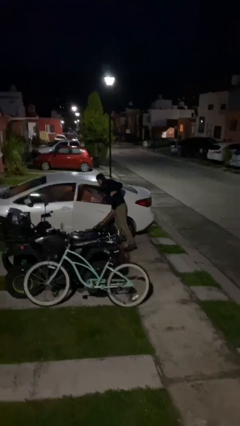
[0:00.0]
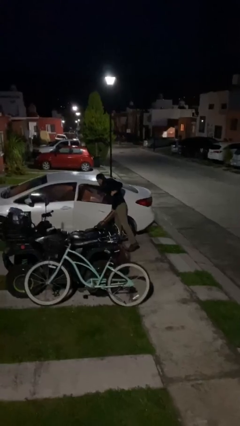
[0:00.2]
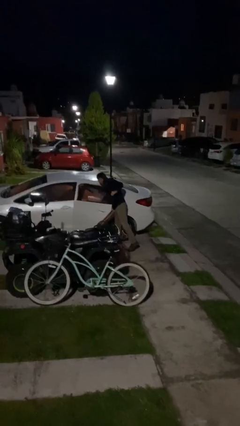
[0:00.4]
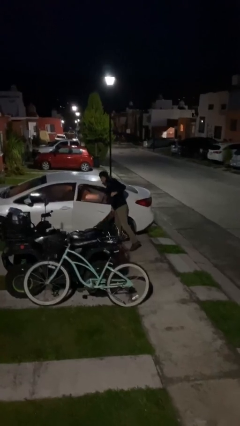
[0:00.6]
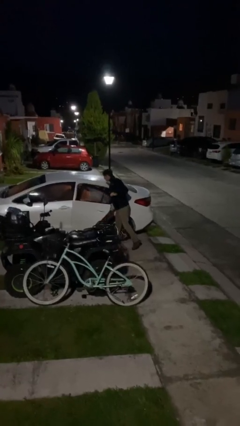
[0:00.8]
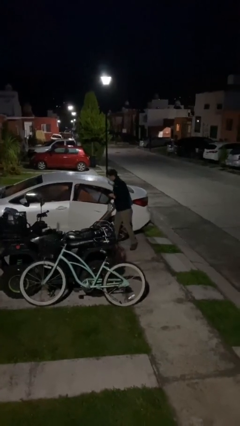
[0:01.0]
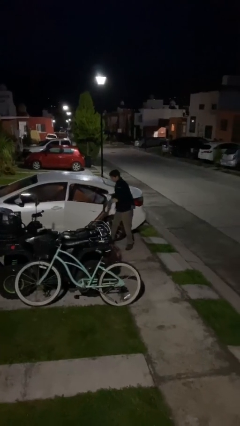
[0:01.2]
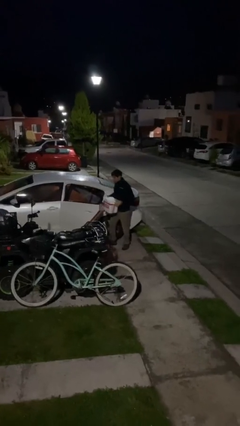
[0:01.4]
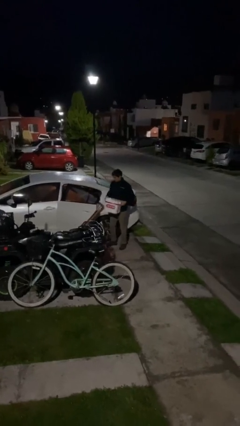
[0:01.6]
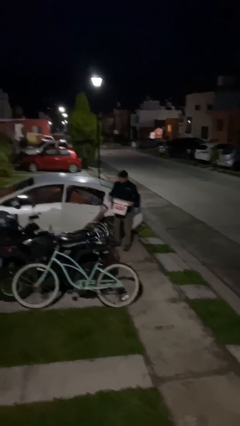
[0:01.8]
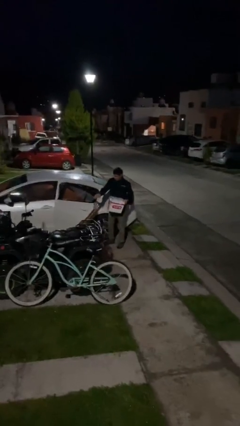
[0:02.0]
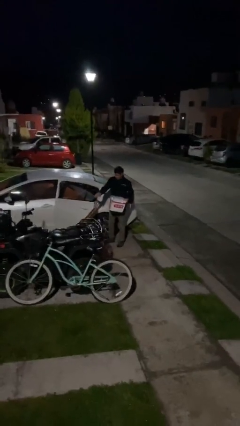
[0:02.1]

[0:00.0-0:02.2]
person unloads car

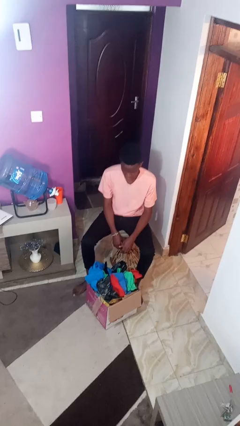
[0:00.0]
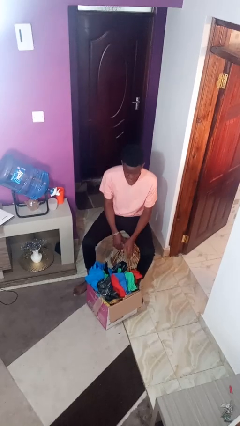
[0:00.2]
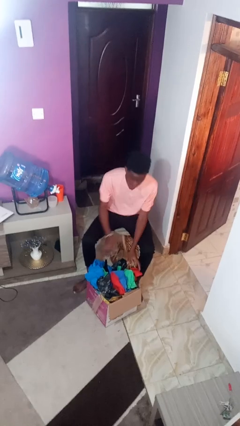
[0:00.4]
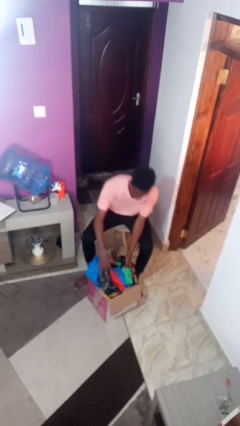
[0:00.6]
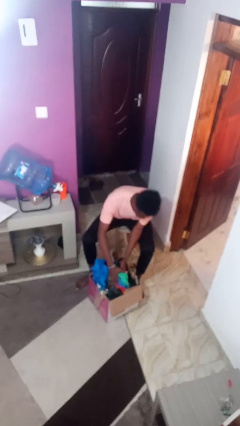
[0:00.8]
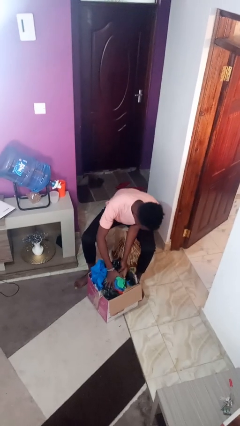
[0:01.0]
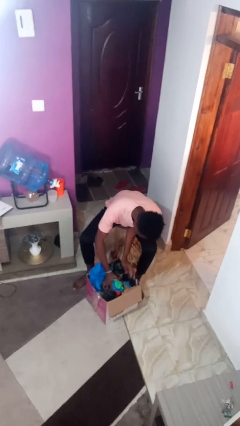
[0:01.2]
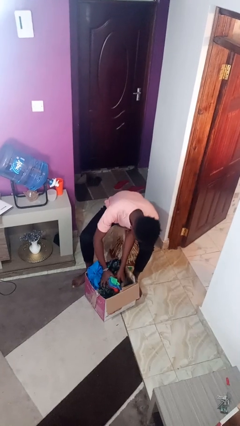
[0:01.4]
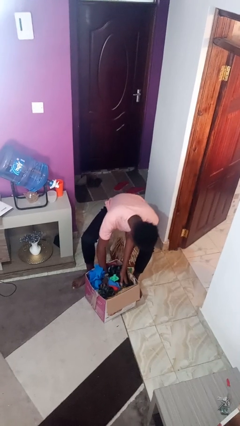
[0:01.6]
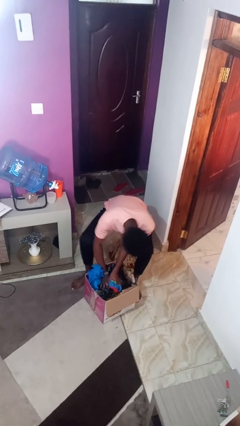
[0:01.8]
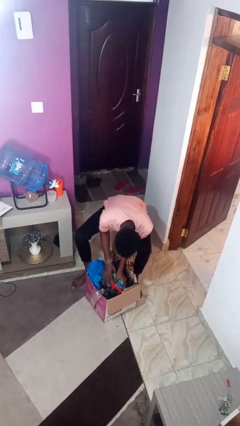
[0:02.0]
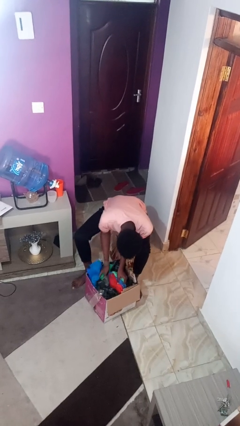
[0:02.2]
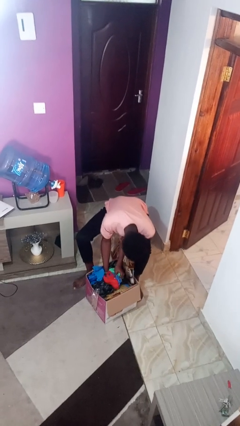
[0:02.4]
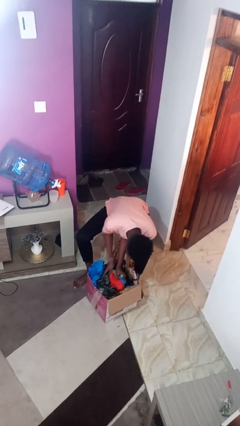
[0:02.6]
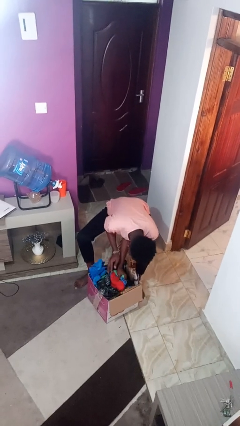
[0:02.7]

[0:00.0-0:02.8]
person searches in box

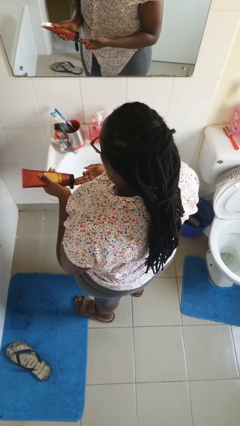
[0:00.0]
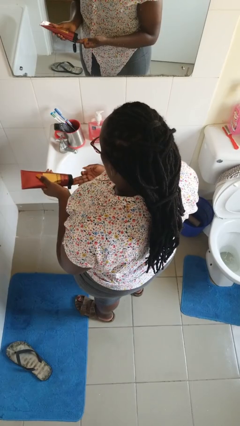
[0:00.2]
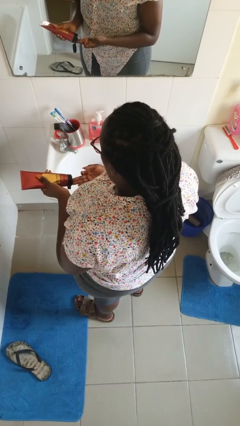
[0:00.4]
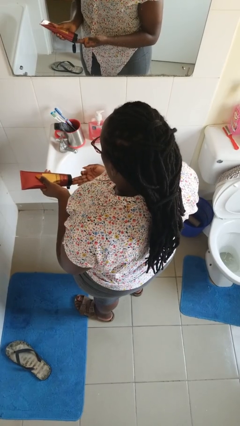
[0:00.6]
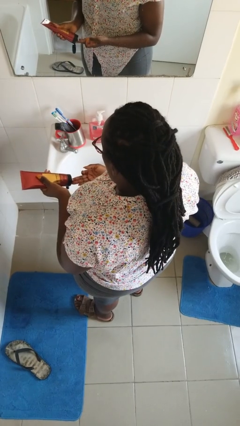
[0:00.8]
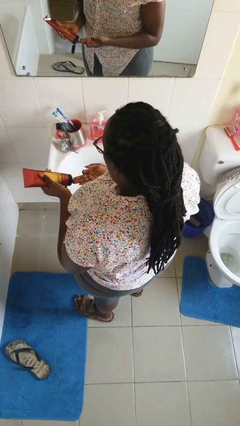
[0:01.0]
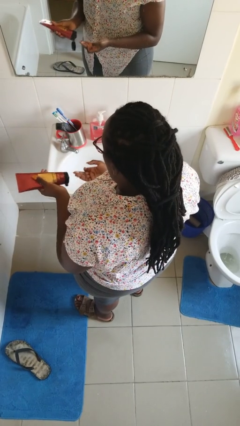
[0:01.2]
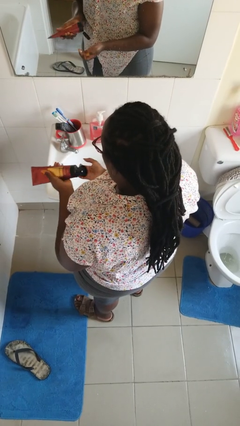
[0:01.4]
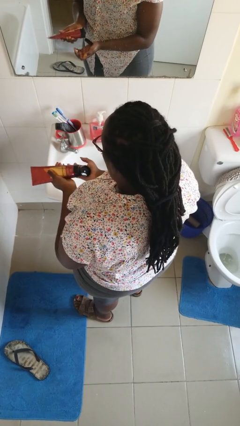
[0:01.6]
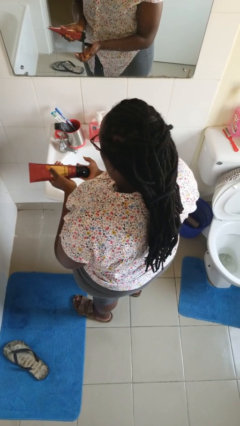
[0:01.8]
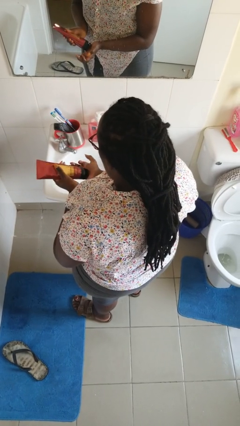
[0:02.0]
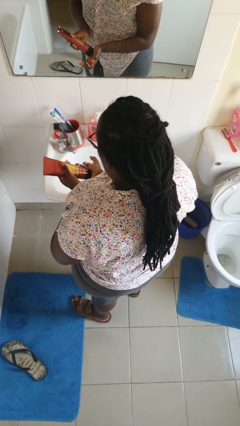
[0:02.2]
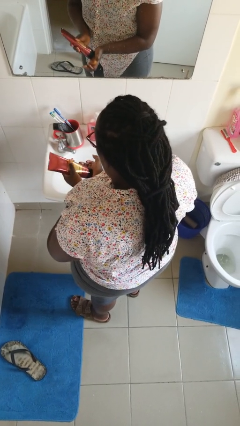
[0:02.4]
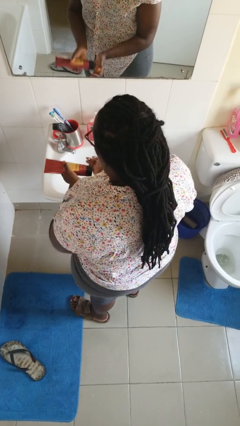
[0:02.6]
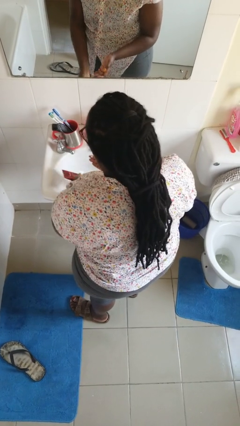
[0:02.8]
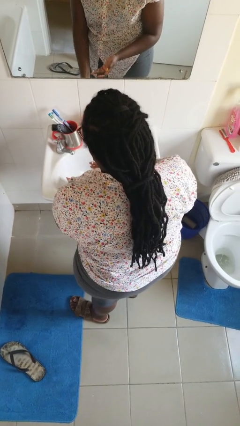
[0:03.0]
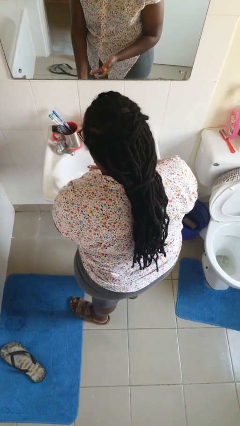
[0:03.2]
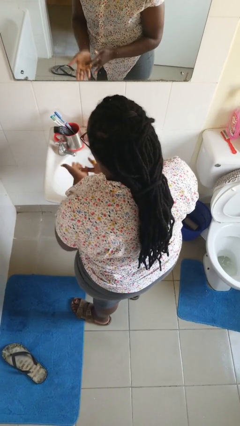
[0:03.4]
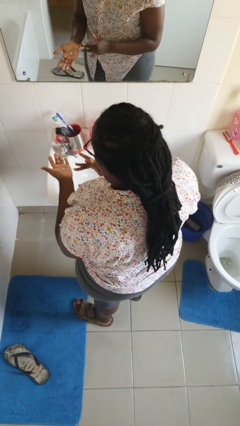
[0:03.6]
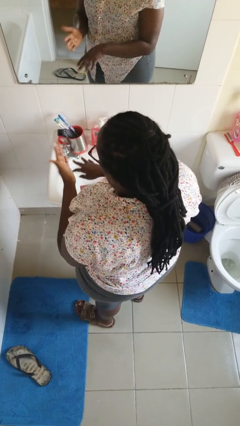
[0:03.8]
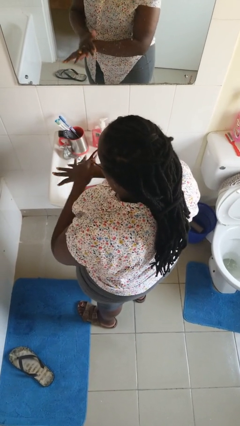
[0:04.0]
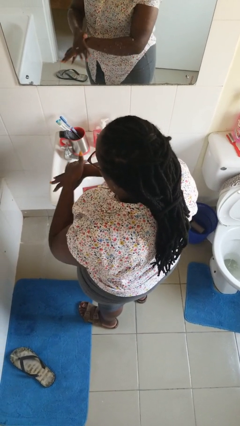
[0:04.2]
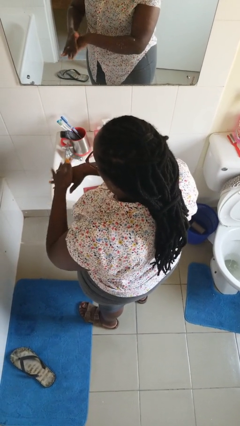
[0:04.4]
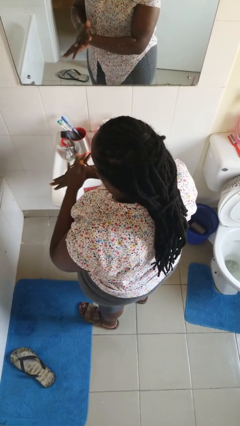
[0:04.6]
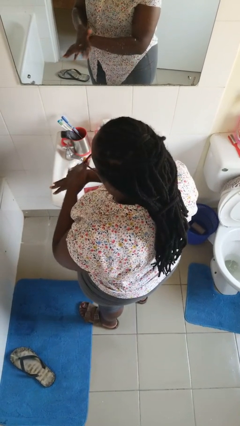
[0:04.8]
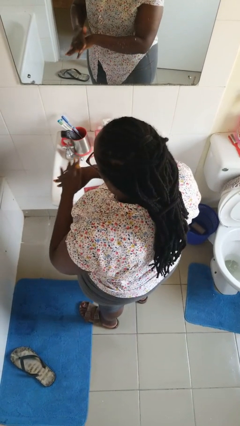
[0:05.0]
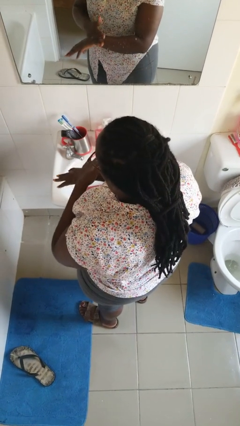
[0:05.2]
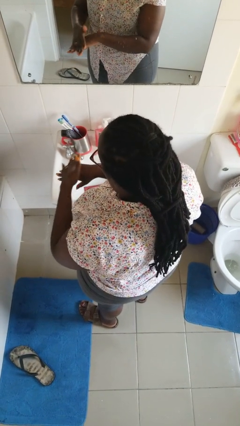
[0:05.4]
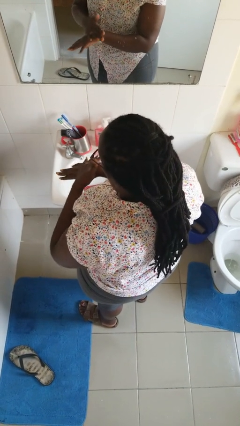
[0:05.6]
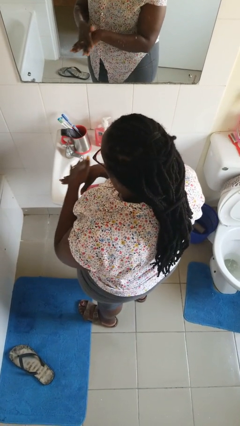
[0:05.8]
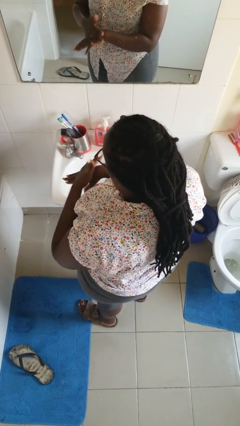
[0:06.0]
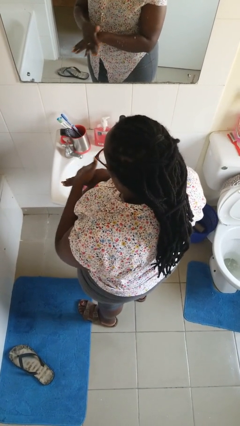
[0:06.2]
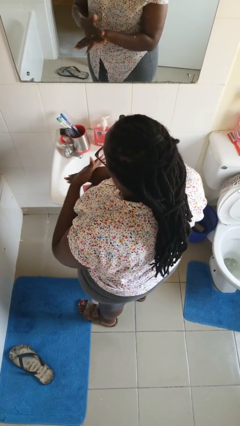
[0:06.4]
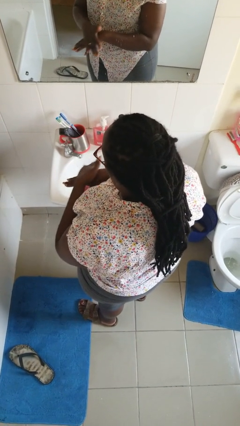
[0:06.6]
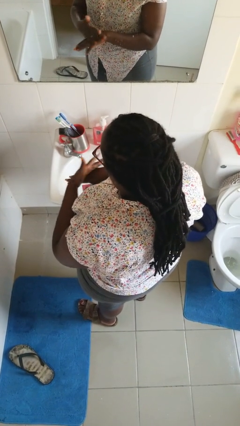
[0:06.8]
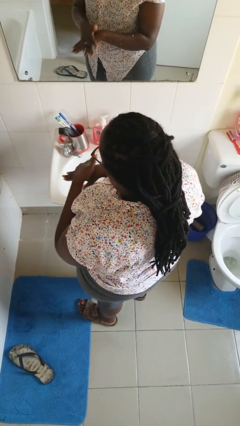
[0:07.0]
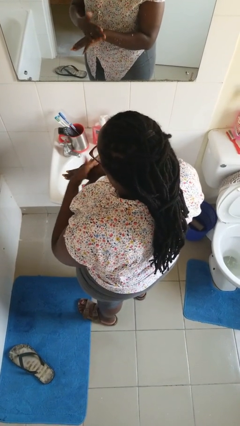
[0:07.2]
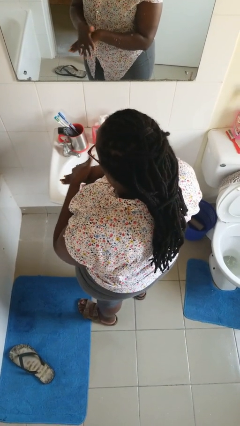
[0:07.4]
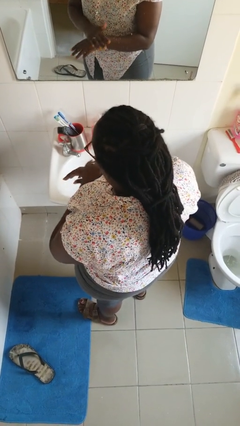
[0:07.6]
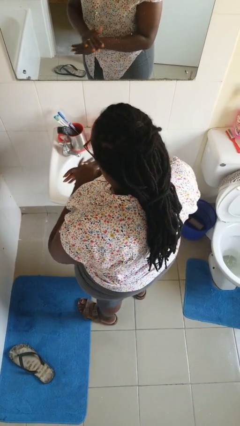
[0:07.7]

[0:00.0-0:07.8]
person applies sunscreen

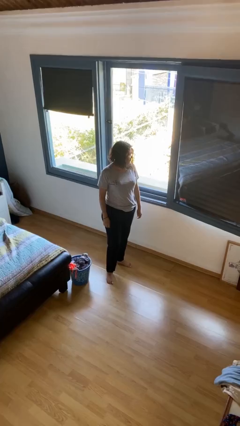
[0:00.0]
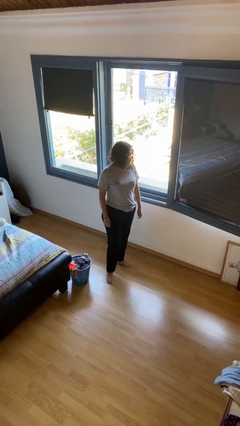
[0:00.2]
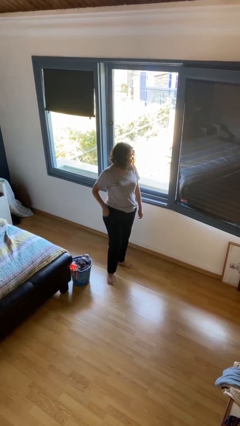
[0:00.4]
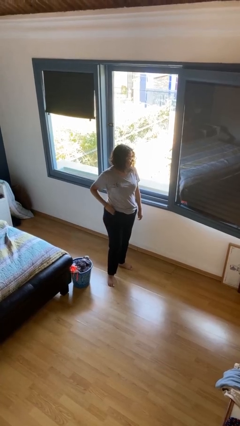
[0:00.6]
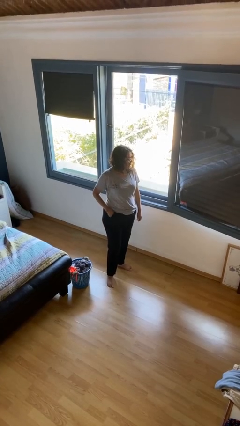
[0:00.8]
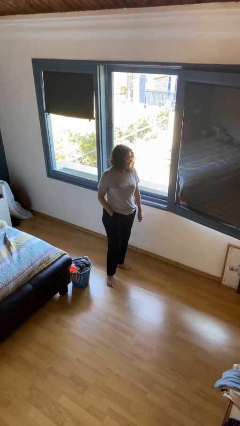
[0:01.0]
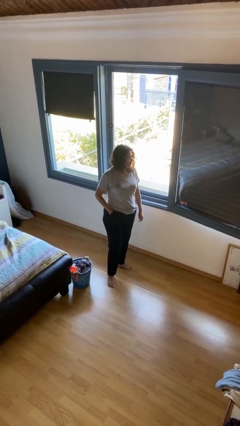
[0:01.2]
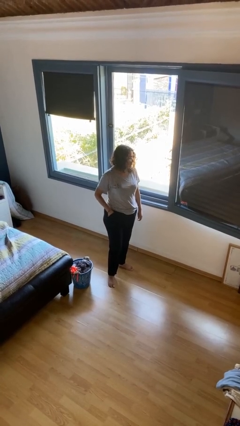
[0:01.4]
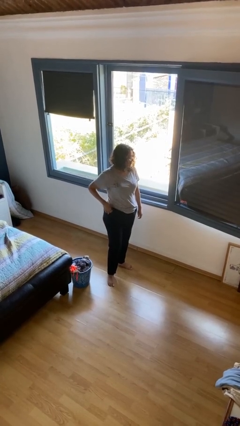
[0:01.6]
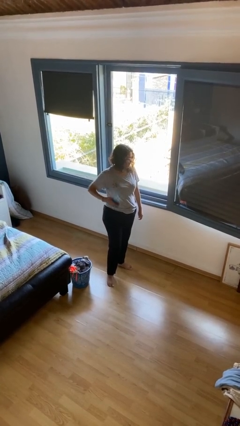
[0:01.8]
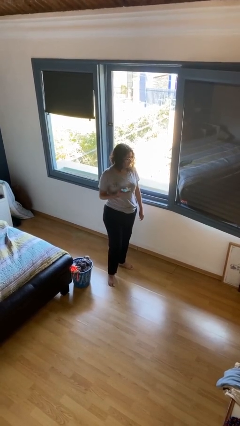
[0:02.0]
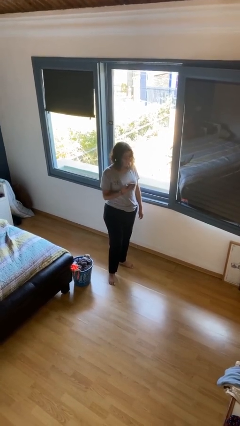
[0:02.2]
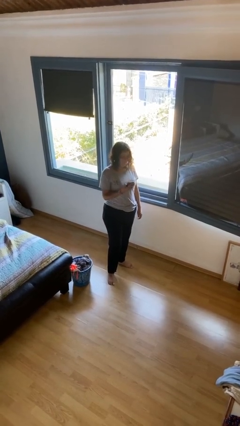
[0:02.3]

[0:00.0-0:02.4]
person takes phone from pocket

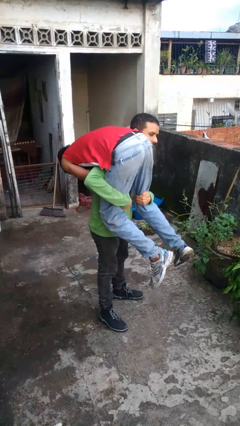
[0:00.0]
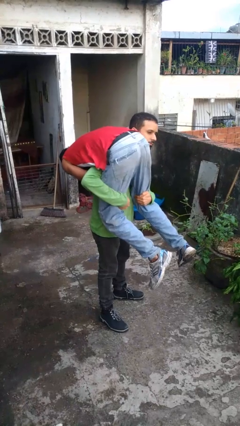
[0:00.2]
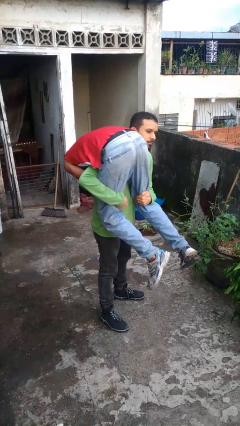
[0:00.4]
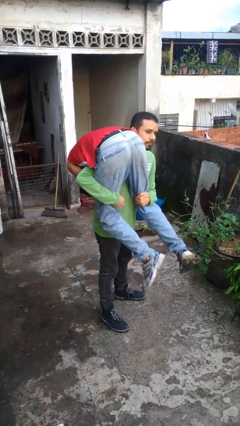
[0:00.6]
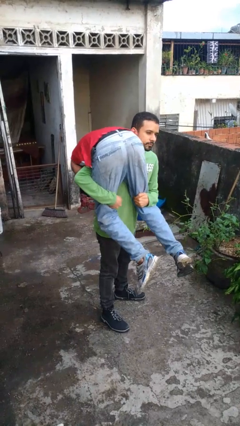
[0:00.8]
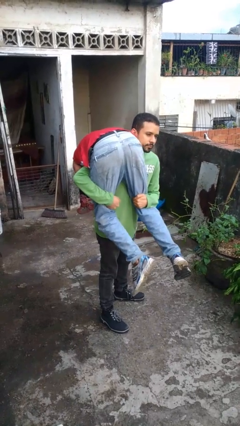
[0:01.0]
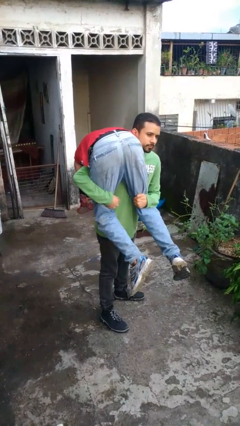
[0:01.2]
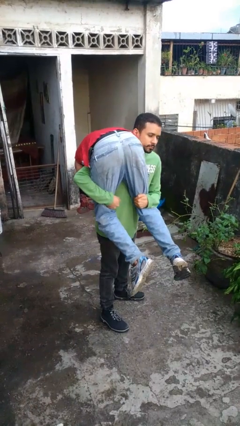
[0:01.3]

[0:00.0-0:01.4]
person puts down person

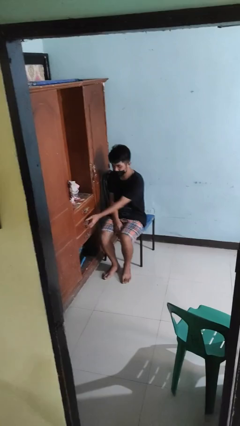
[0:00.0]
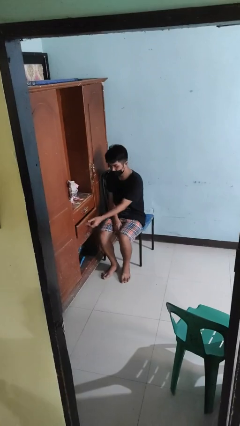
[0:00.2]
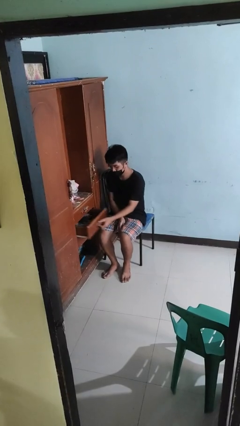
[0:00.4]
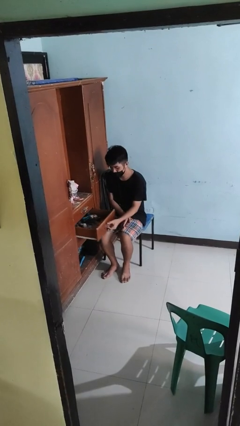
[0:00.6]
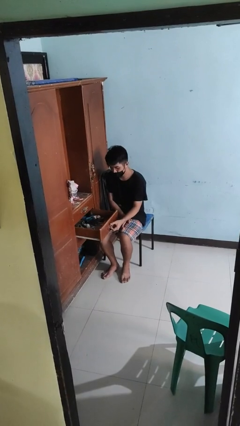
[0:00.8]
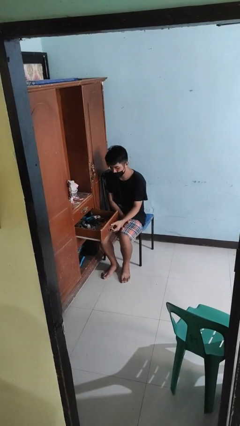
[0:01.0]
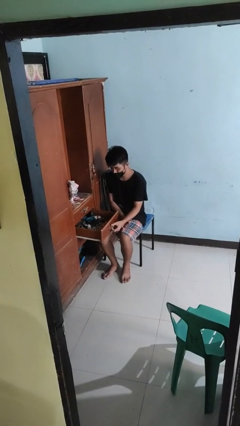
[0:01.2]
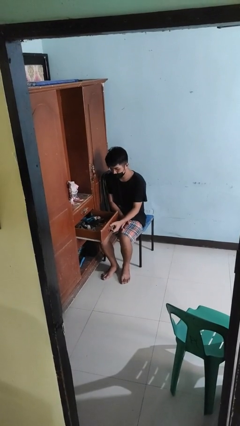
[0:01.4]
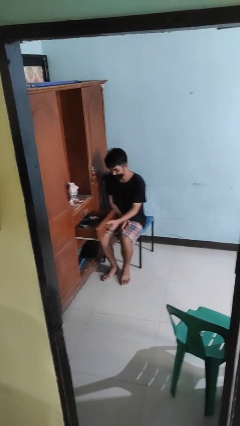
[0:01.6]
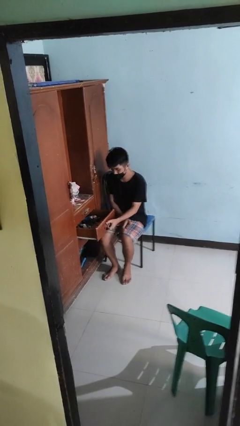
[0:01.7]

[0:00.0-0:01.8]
person opens dresser drawer
